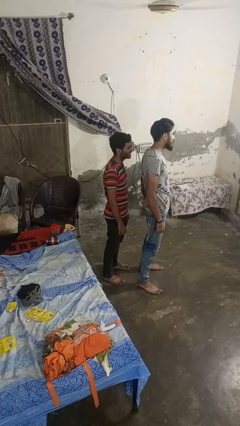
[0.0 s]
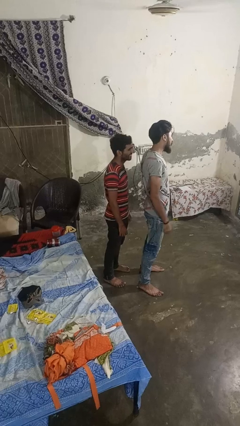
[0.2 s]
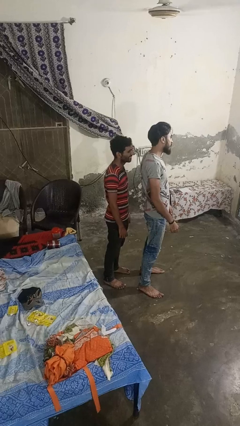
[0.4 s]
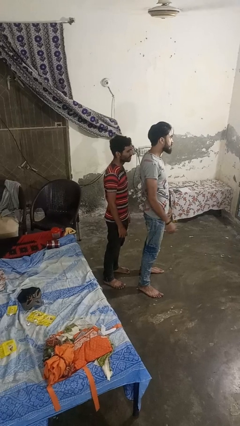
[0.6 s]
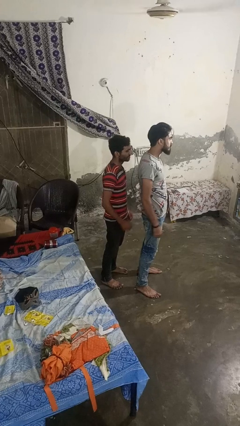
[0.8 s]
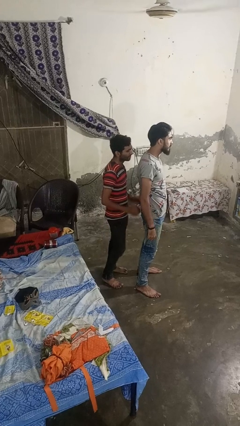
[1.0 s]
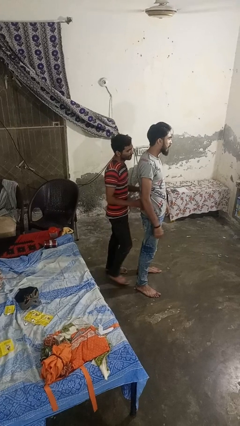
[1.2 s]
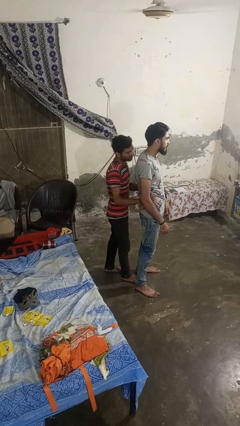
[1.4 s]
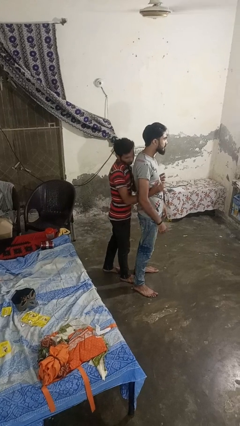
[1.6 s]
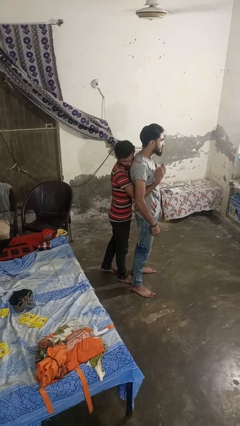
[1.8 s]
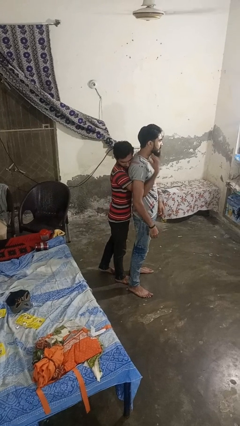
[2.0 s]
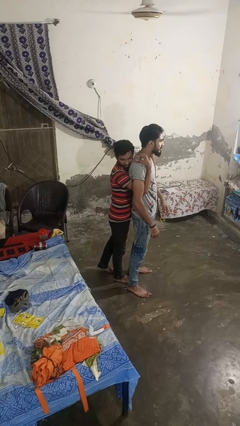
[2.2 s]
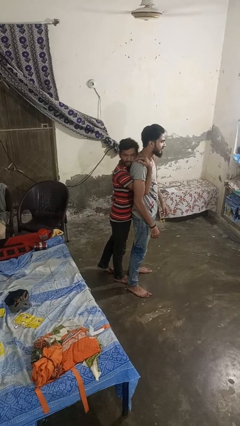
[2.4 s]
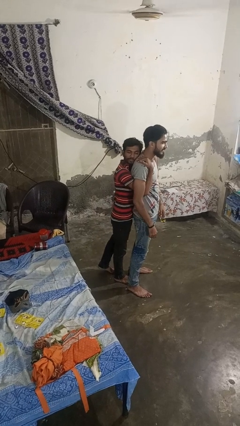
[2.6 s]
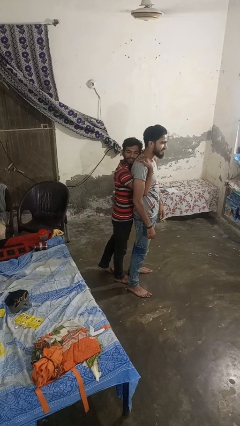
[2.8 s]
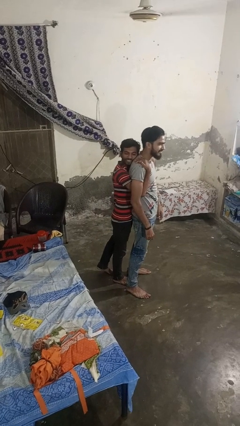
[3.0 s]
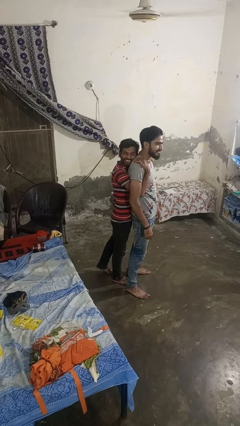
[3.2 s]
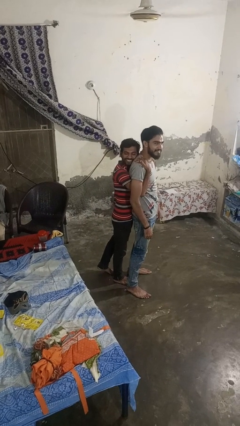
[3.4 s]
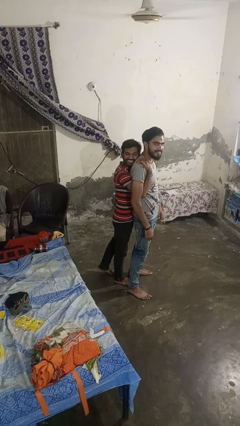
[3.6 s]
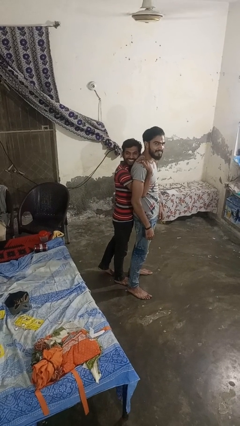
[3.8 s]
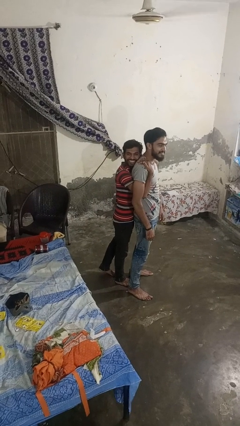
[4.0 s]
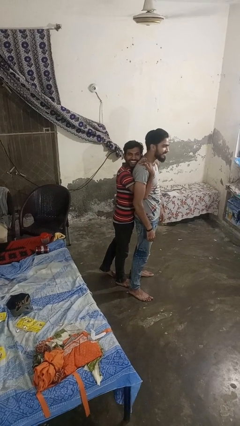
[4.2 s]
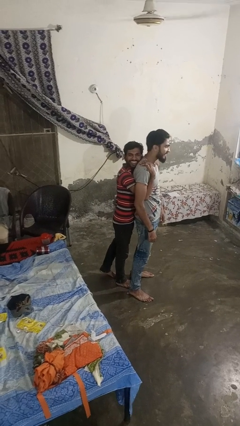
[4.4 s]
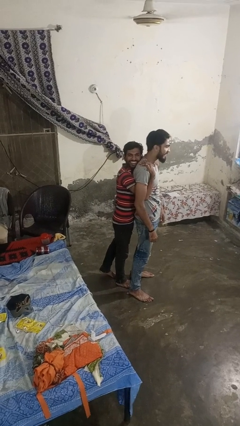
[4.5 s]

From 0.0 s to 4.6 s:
person hugs person from behind

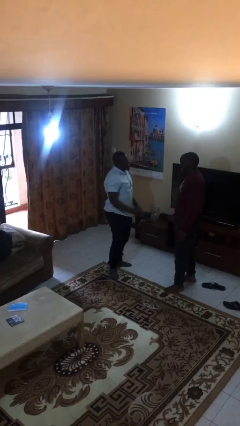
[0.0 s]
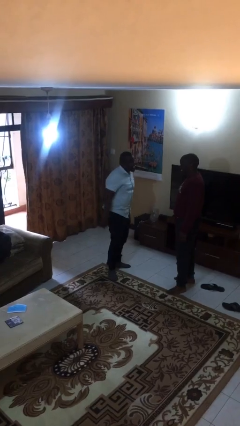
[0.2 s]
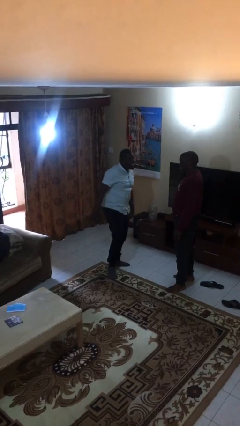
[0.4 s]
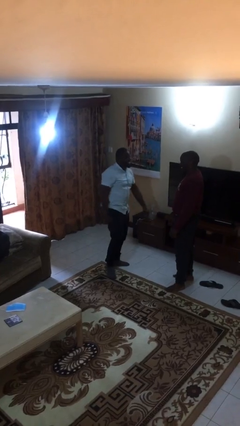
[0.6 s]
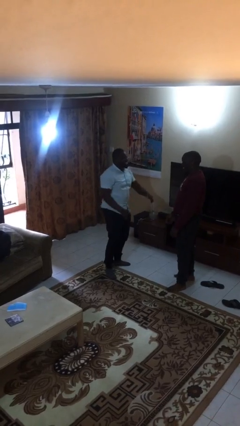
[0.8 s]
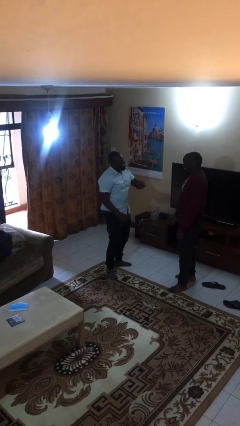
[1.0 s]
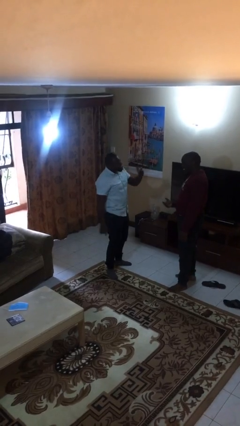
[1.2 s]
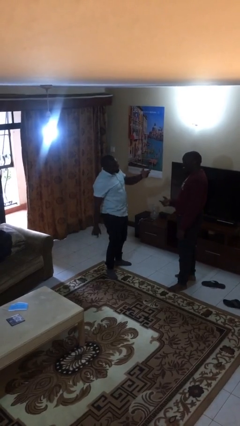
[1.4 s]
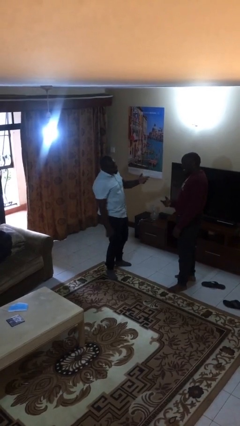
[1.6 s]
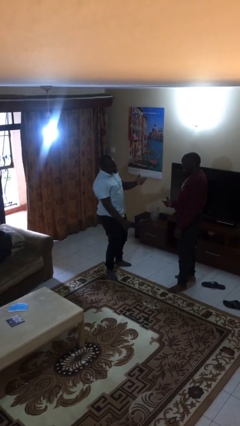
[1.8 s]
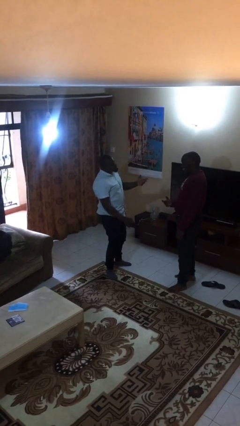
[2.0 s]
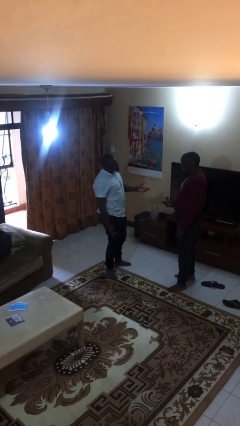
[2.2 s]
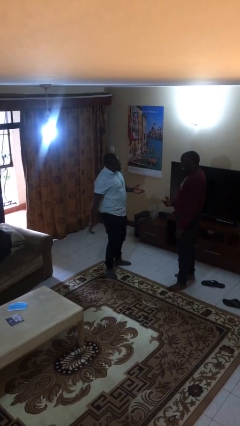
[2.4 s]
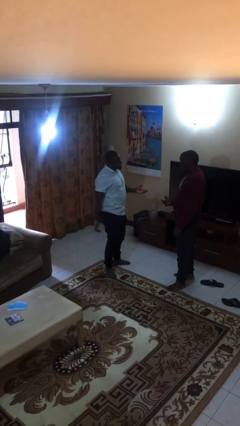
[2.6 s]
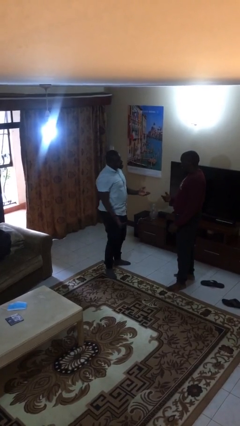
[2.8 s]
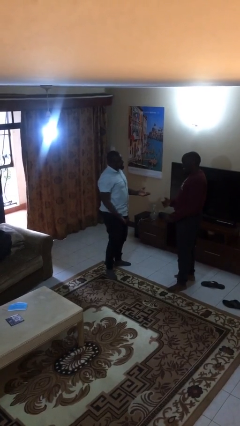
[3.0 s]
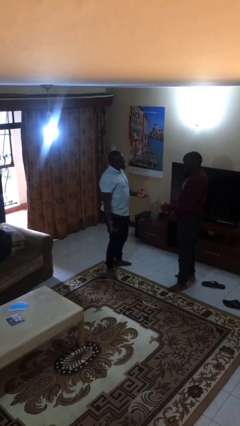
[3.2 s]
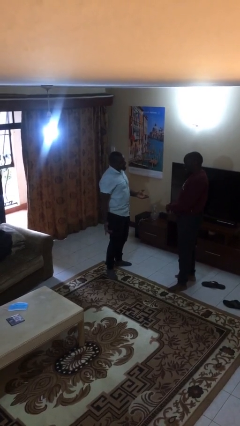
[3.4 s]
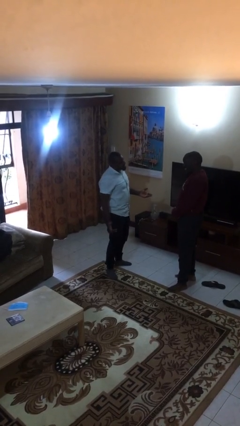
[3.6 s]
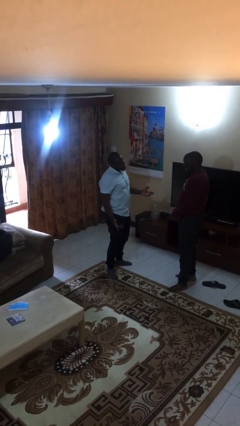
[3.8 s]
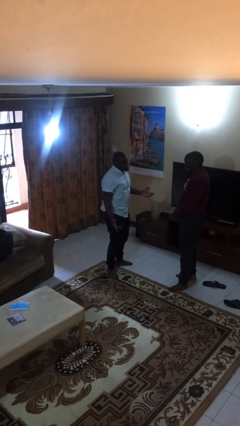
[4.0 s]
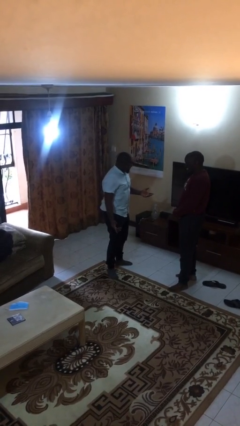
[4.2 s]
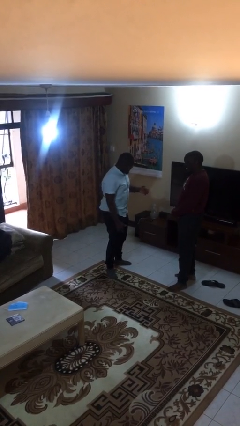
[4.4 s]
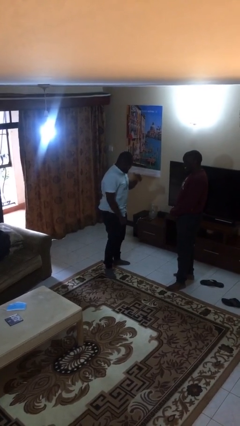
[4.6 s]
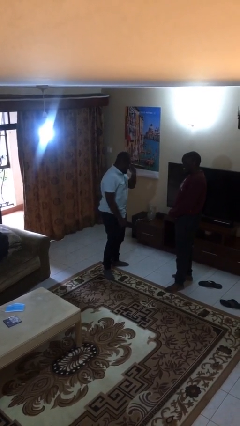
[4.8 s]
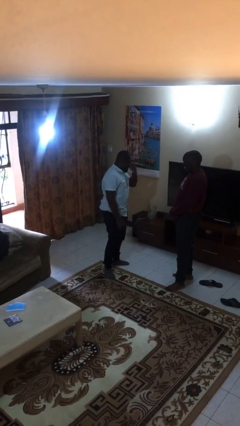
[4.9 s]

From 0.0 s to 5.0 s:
person talks to person

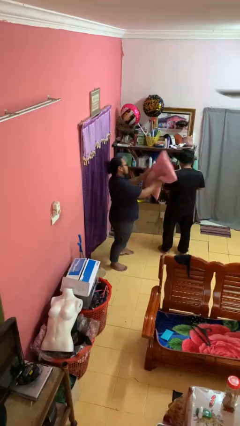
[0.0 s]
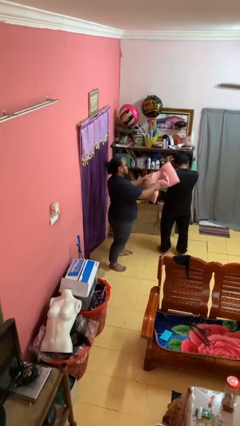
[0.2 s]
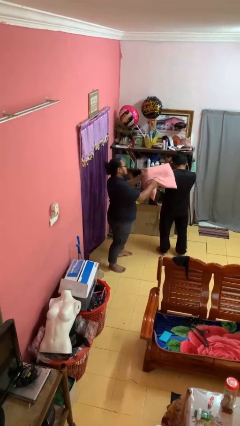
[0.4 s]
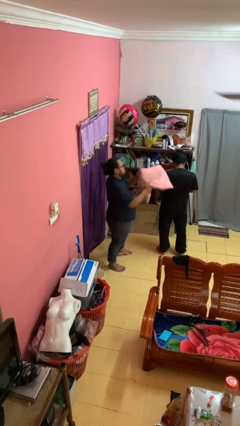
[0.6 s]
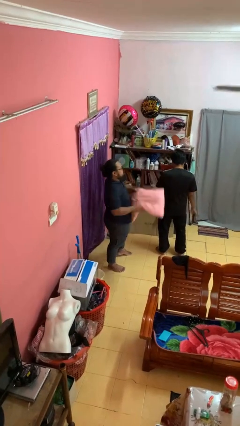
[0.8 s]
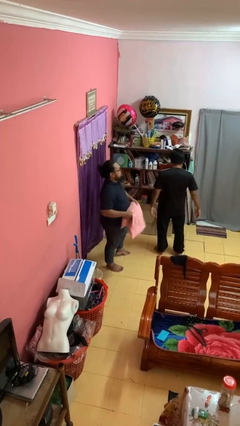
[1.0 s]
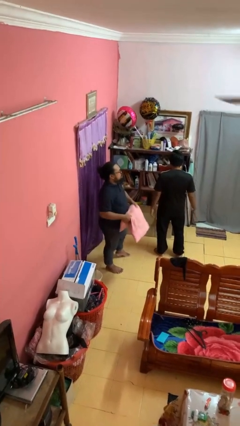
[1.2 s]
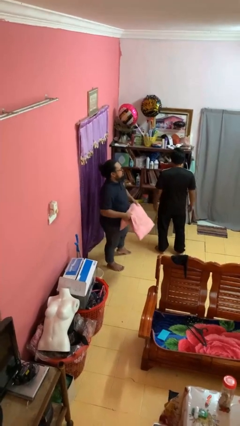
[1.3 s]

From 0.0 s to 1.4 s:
person hits person with pillow

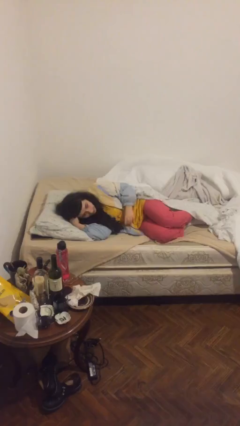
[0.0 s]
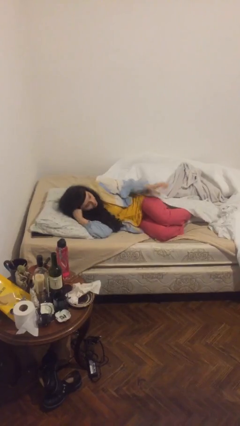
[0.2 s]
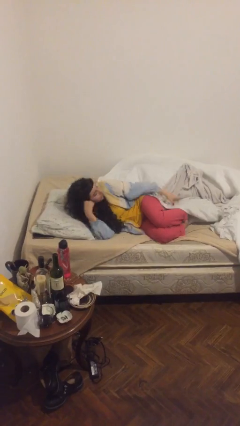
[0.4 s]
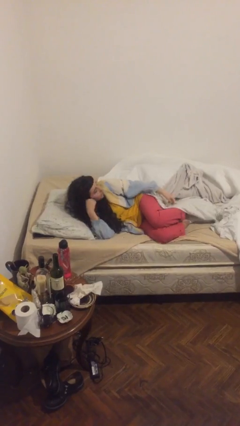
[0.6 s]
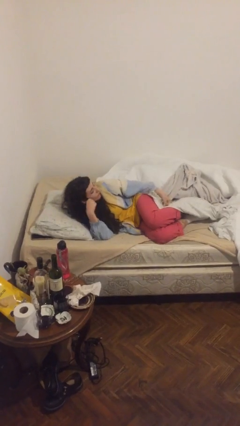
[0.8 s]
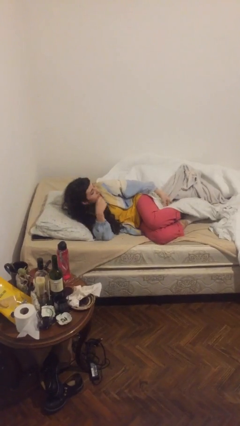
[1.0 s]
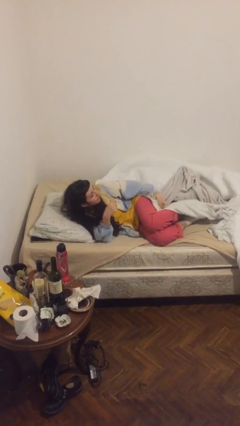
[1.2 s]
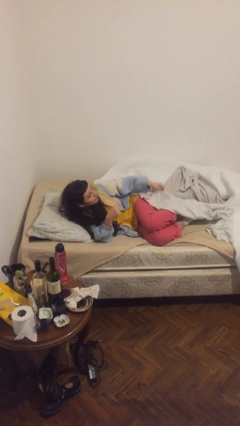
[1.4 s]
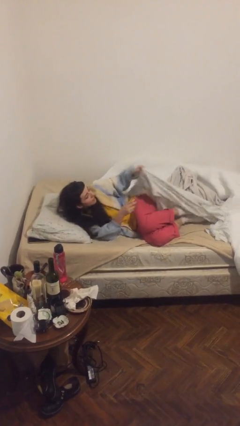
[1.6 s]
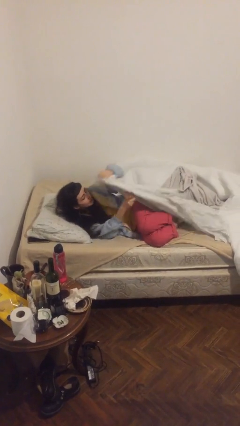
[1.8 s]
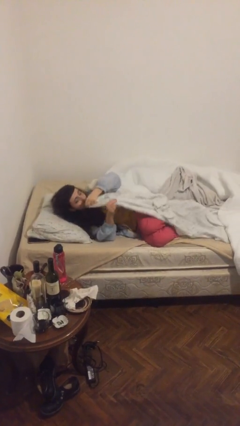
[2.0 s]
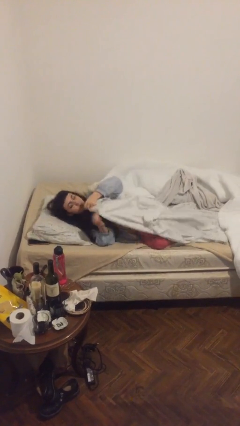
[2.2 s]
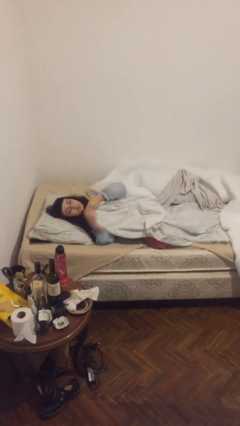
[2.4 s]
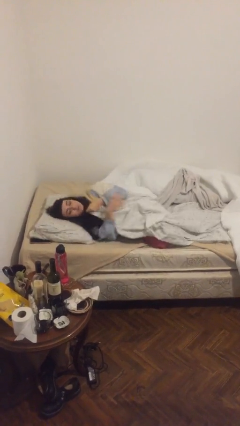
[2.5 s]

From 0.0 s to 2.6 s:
person covers with bedsheets

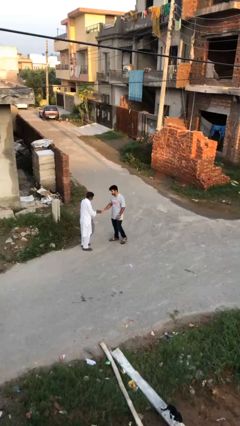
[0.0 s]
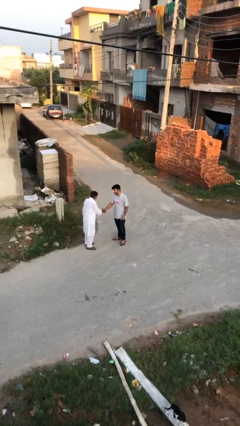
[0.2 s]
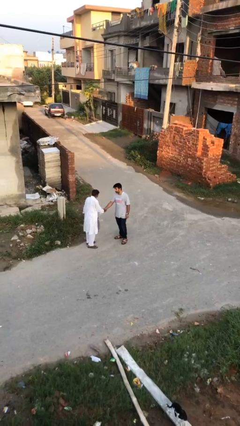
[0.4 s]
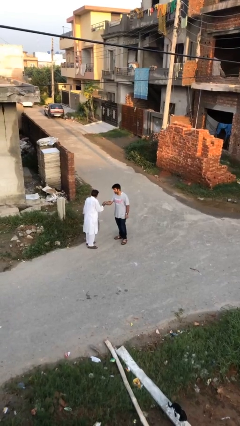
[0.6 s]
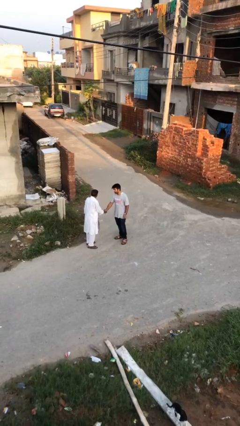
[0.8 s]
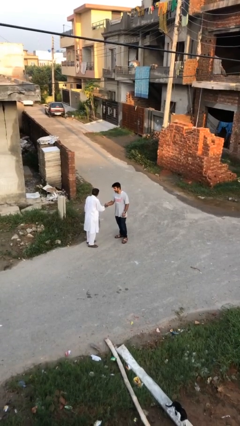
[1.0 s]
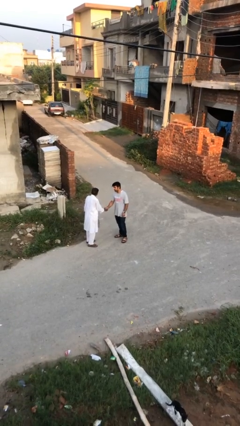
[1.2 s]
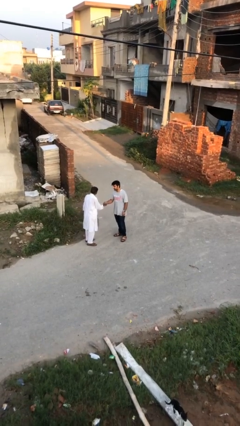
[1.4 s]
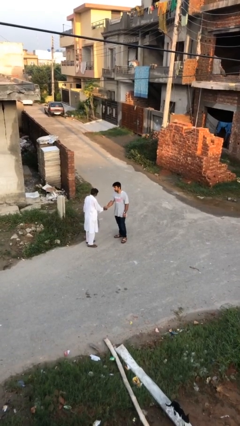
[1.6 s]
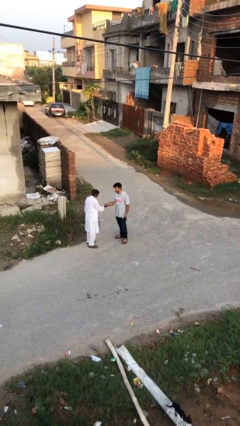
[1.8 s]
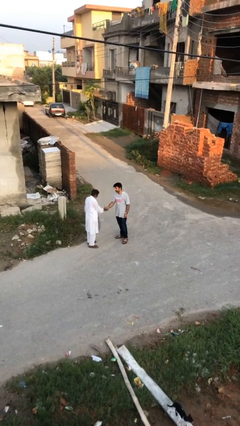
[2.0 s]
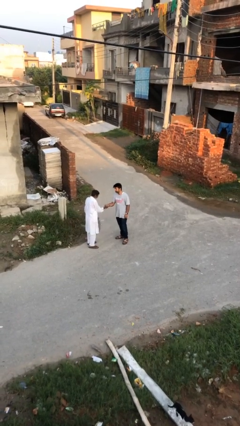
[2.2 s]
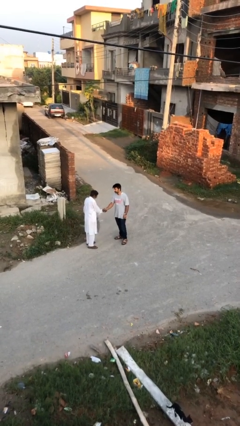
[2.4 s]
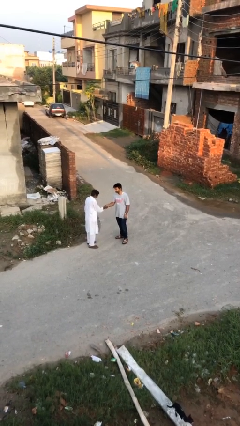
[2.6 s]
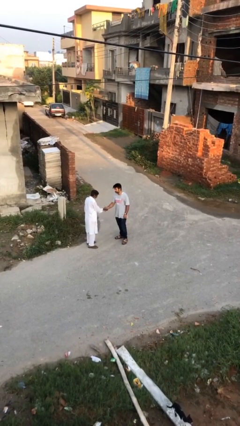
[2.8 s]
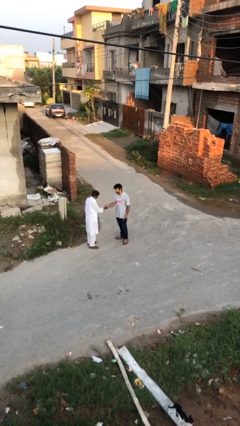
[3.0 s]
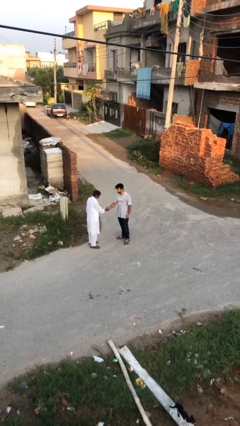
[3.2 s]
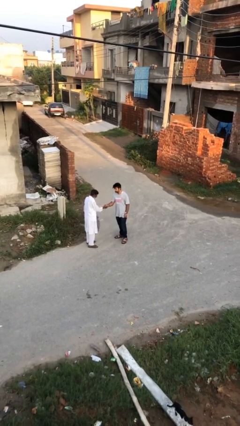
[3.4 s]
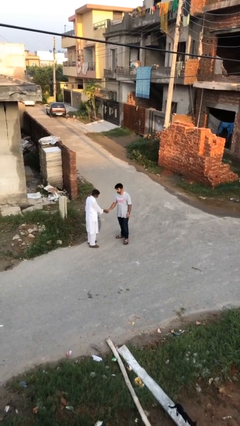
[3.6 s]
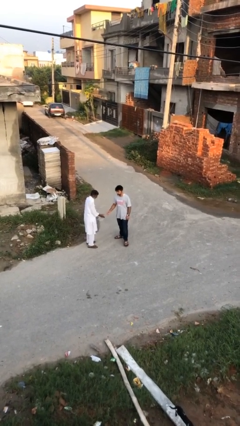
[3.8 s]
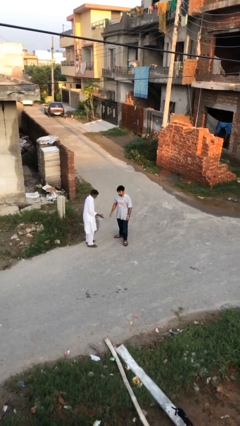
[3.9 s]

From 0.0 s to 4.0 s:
person shakes hand
